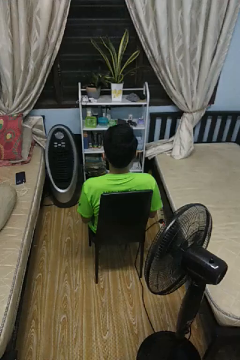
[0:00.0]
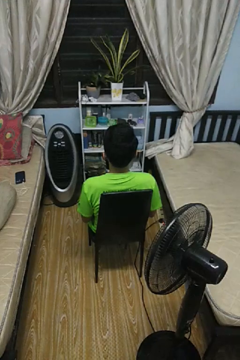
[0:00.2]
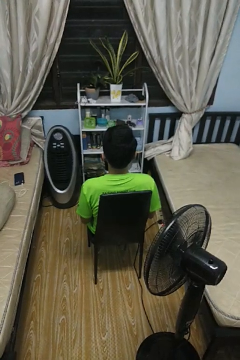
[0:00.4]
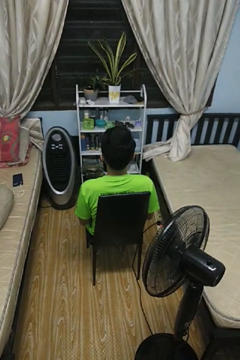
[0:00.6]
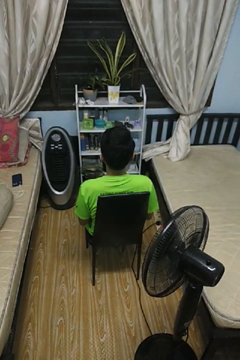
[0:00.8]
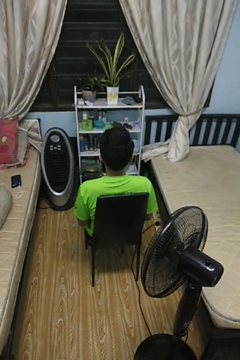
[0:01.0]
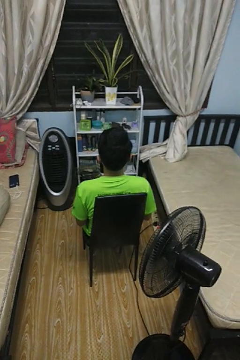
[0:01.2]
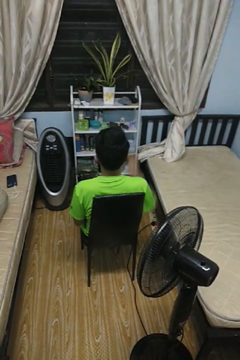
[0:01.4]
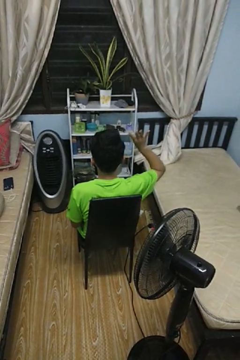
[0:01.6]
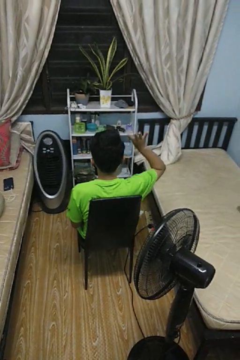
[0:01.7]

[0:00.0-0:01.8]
person gestures number four

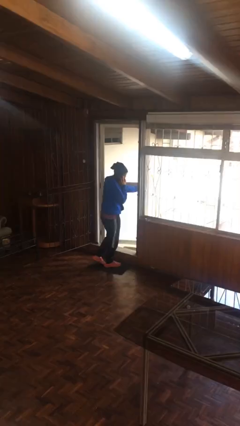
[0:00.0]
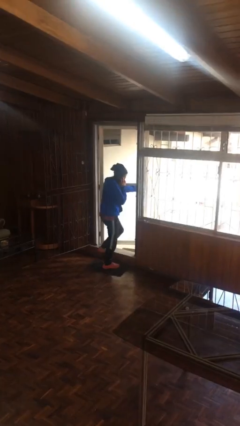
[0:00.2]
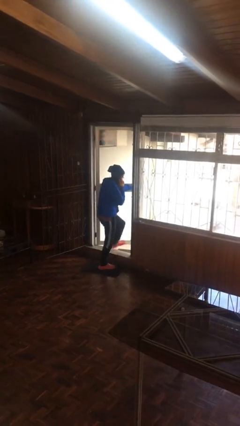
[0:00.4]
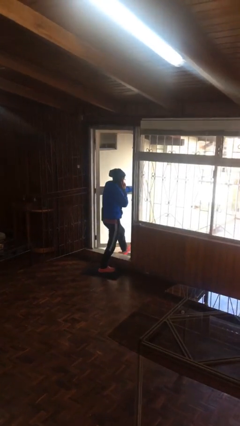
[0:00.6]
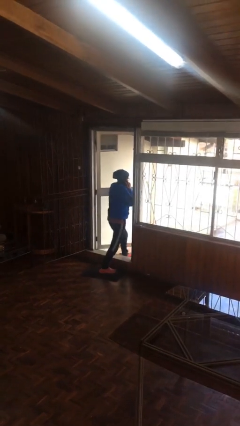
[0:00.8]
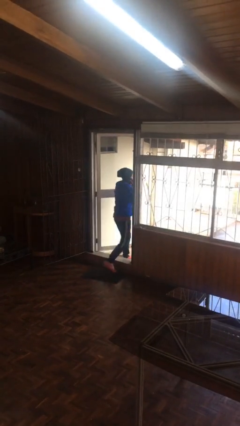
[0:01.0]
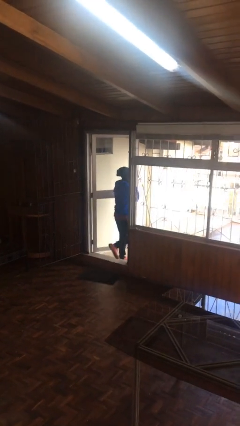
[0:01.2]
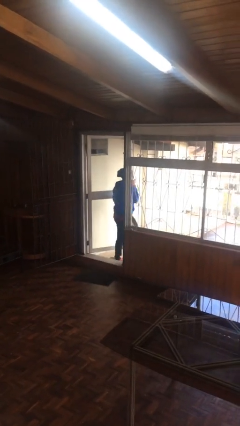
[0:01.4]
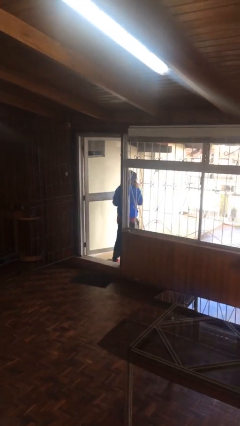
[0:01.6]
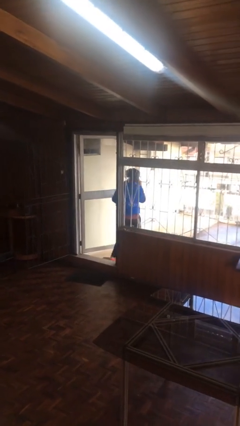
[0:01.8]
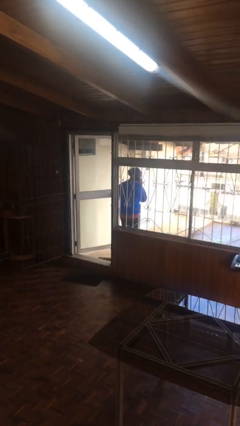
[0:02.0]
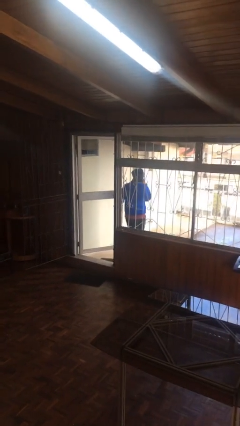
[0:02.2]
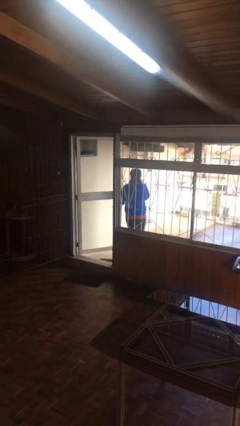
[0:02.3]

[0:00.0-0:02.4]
person exits scene through structure

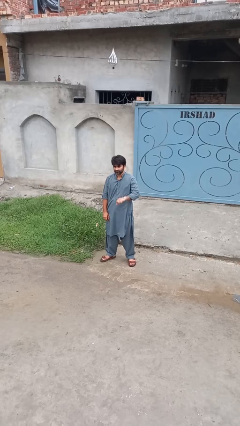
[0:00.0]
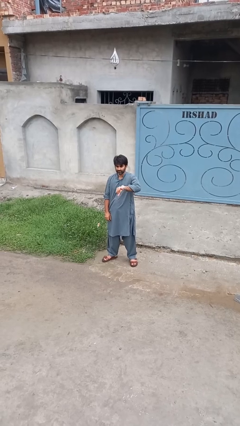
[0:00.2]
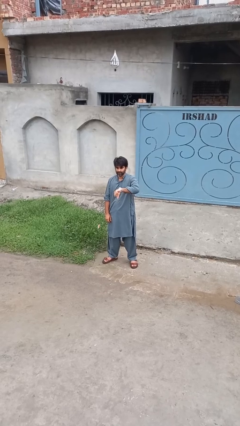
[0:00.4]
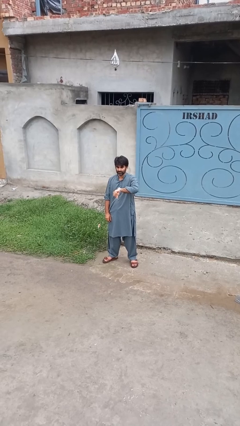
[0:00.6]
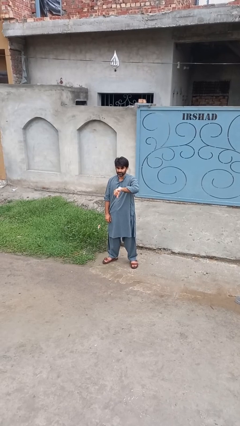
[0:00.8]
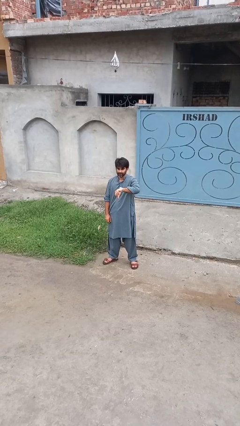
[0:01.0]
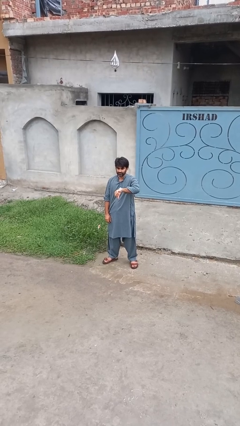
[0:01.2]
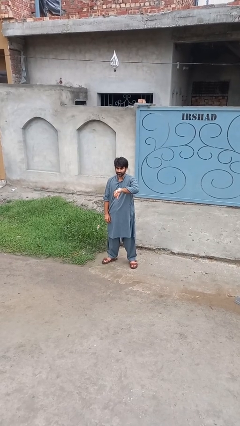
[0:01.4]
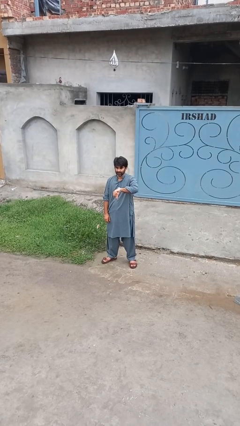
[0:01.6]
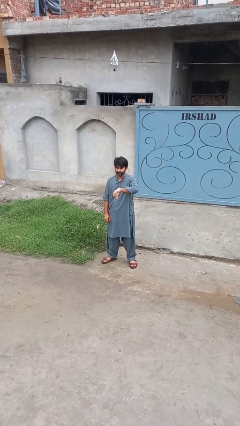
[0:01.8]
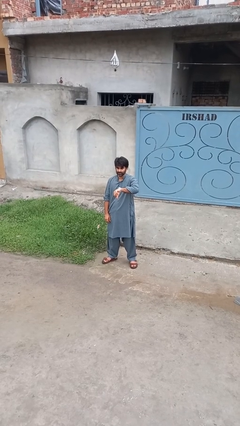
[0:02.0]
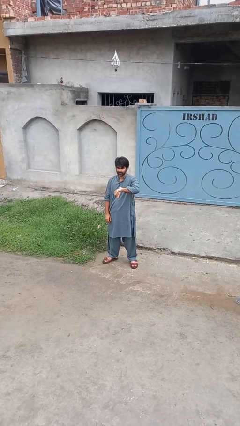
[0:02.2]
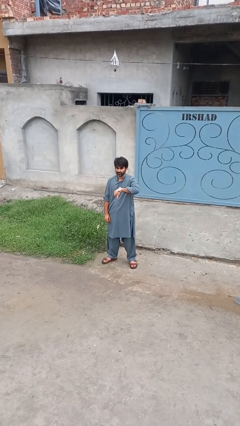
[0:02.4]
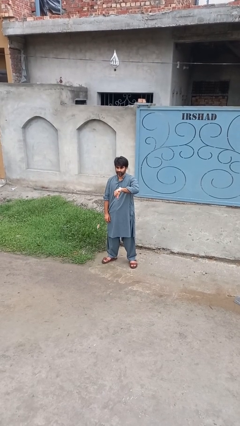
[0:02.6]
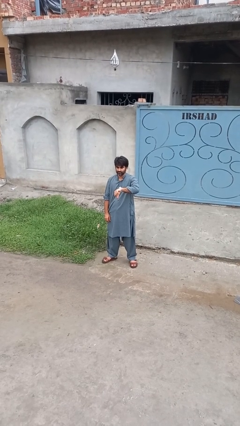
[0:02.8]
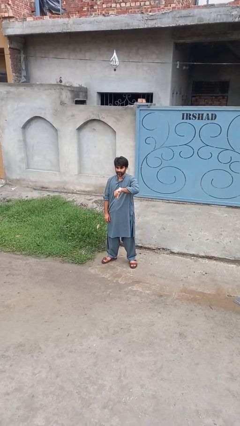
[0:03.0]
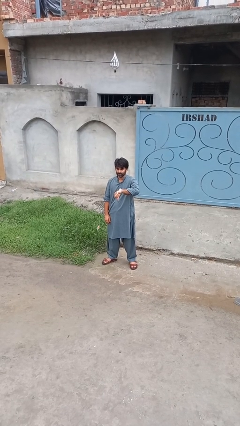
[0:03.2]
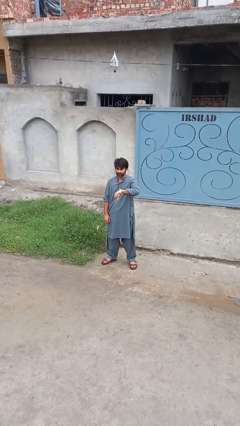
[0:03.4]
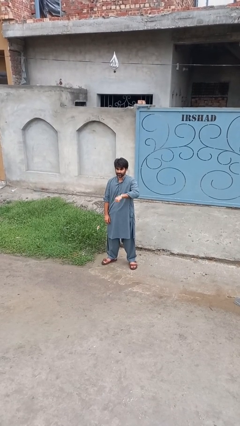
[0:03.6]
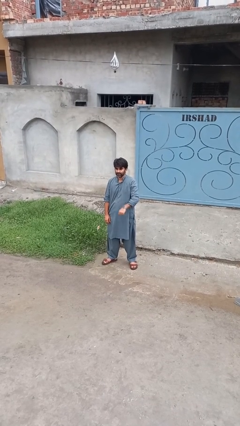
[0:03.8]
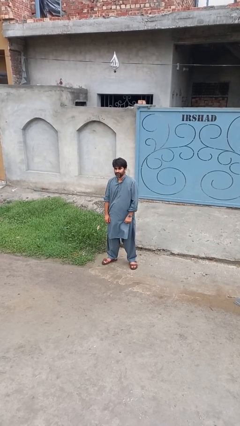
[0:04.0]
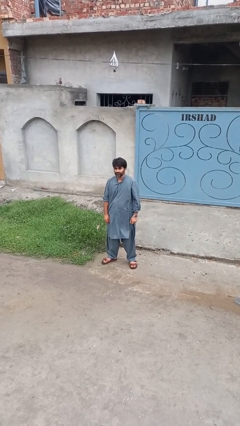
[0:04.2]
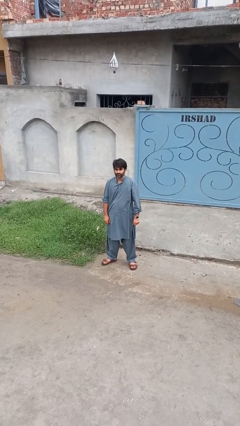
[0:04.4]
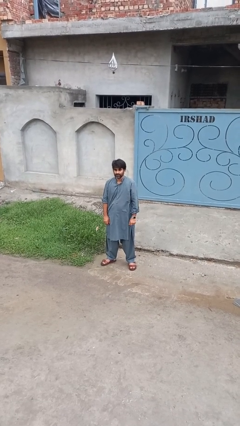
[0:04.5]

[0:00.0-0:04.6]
person gestures thumbs down

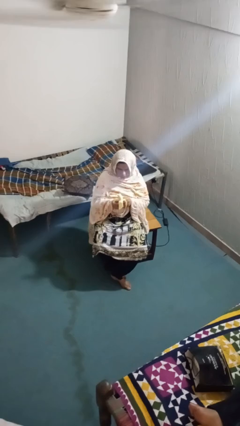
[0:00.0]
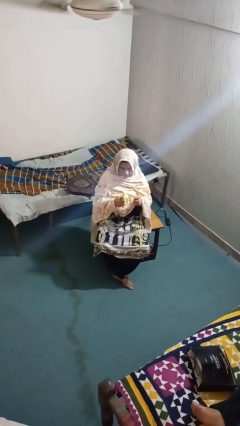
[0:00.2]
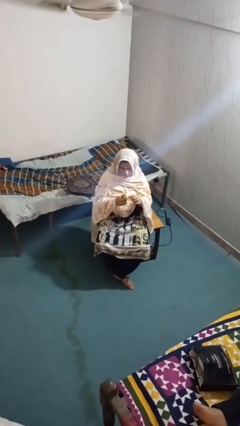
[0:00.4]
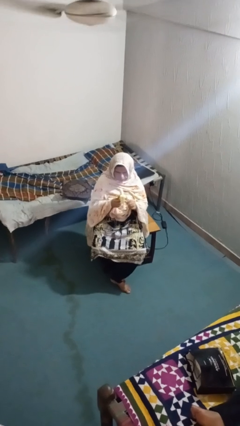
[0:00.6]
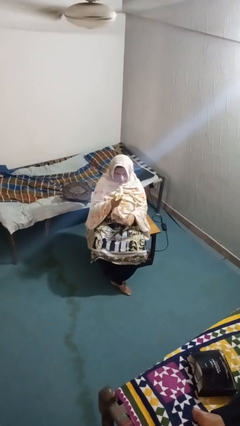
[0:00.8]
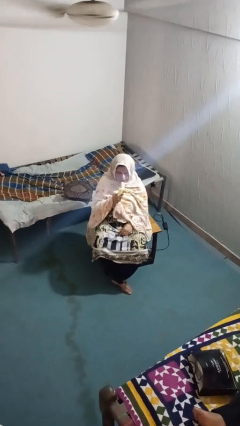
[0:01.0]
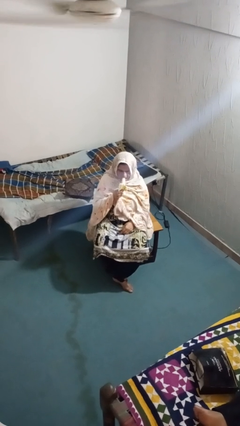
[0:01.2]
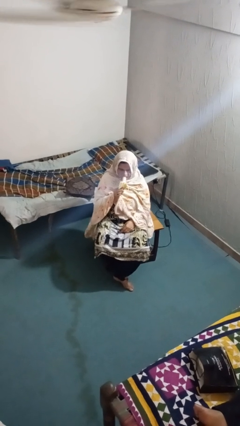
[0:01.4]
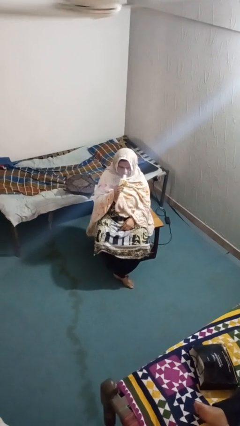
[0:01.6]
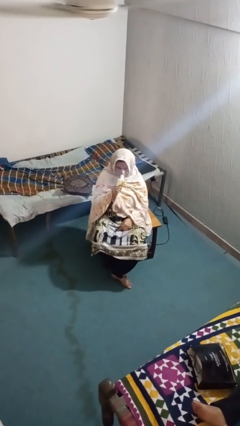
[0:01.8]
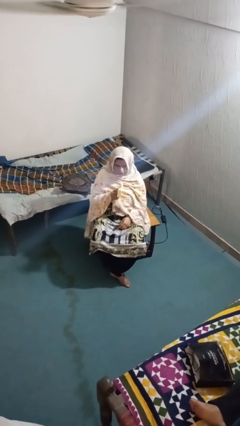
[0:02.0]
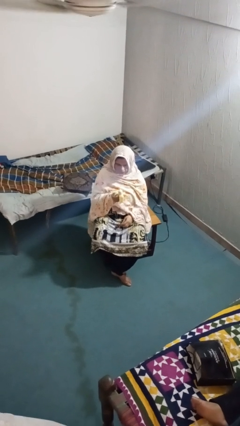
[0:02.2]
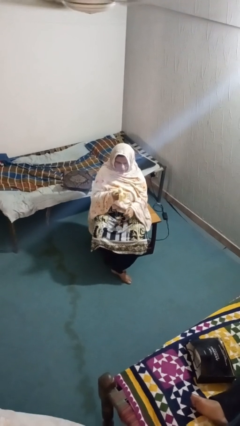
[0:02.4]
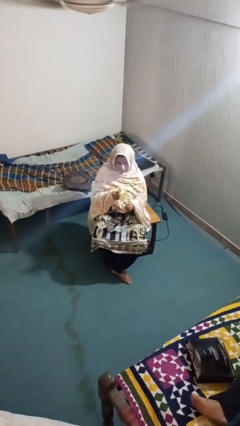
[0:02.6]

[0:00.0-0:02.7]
person eats banana

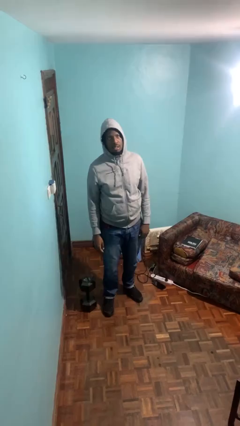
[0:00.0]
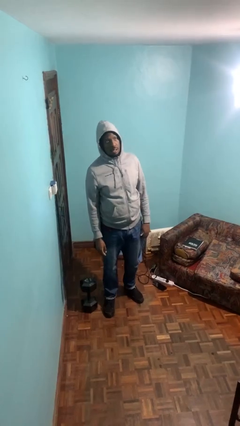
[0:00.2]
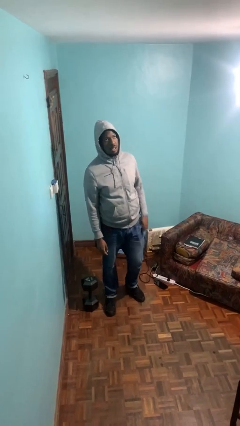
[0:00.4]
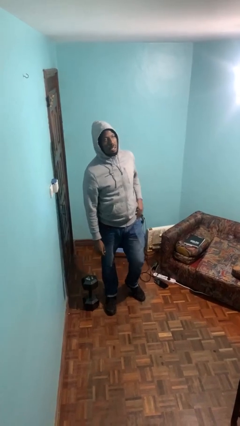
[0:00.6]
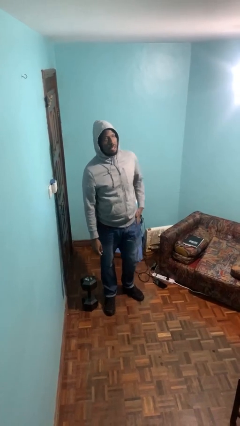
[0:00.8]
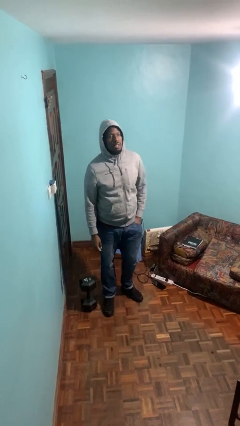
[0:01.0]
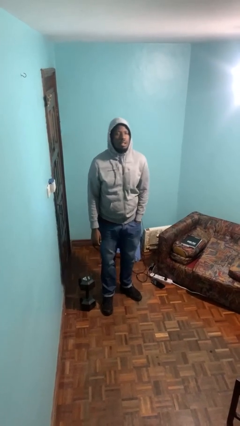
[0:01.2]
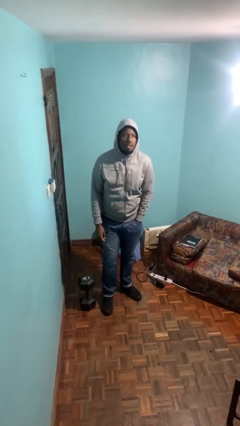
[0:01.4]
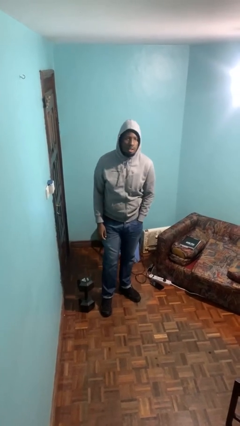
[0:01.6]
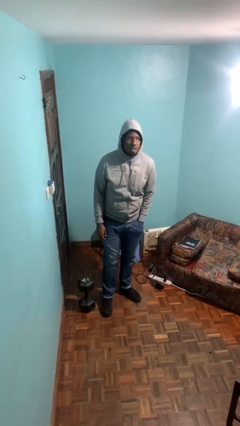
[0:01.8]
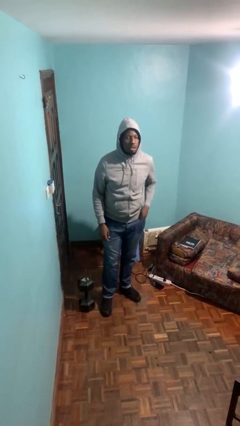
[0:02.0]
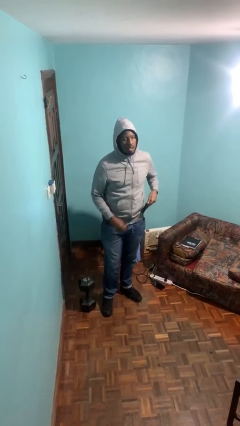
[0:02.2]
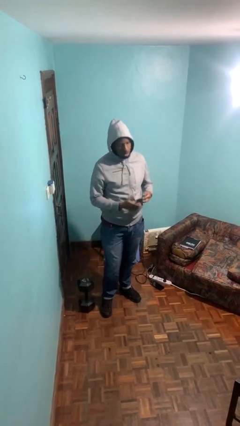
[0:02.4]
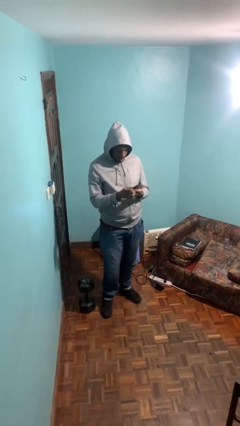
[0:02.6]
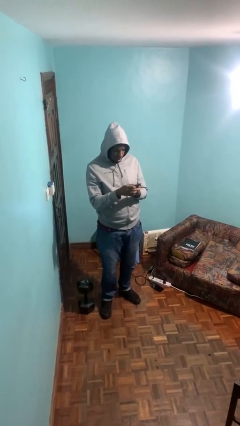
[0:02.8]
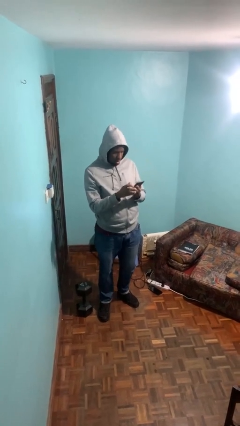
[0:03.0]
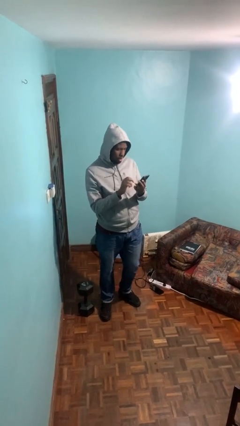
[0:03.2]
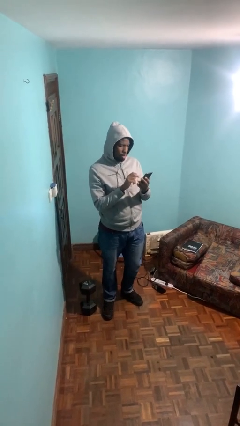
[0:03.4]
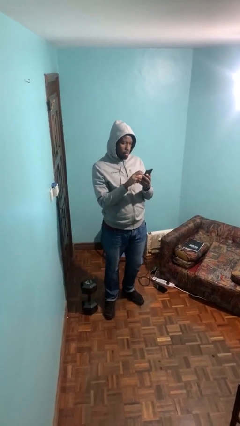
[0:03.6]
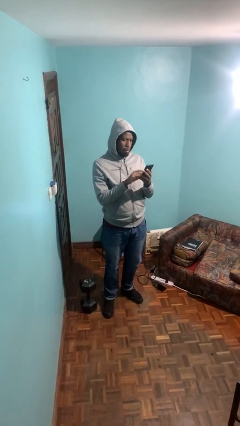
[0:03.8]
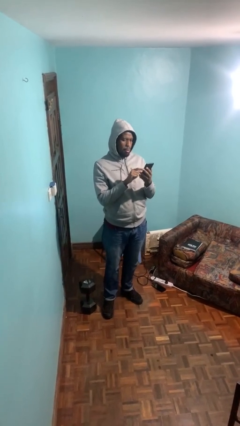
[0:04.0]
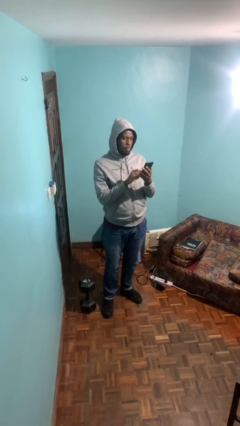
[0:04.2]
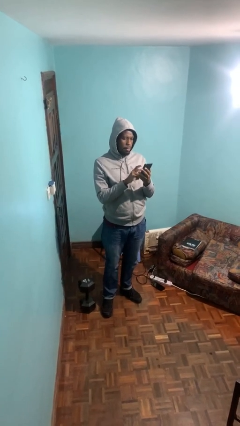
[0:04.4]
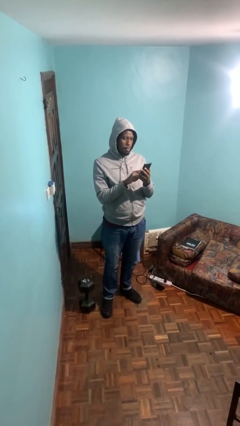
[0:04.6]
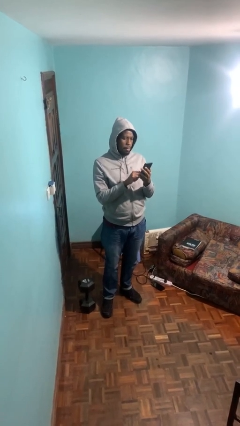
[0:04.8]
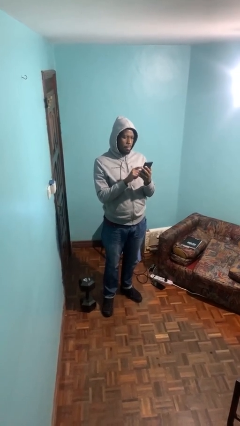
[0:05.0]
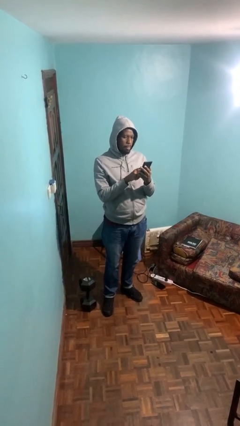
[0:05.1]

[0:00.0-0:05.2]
person takes phone from pocket

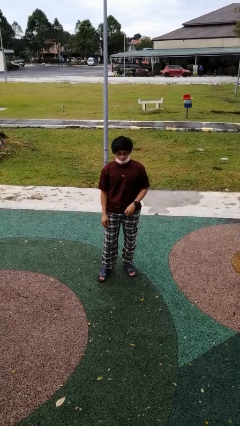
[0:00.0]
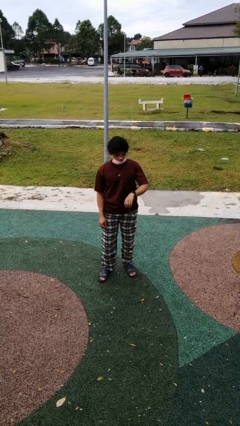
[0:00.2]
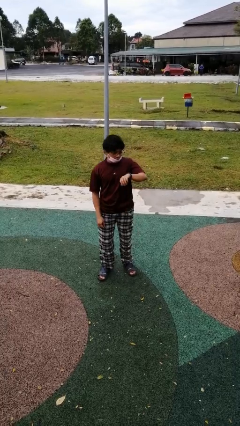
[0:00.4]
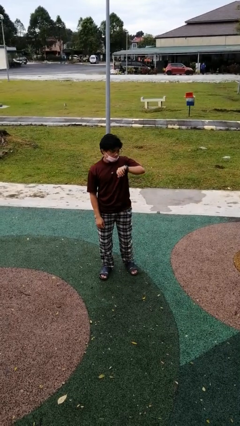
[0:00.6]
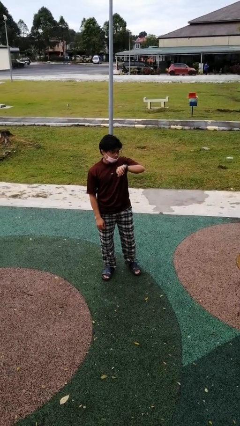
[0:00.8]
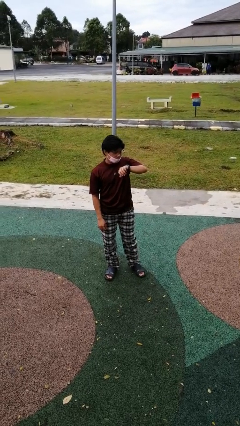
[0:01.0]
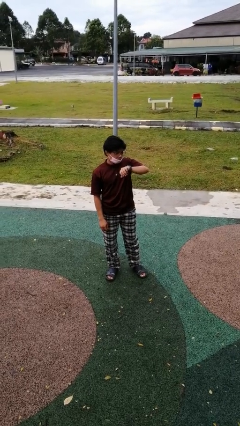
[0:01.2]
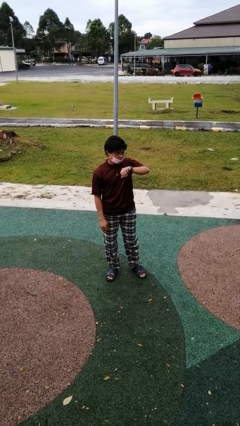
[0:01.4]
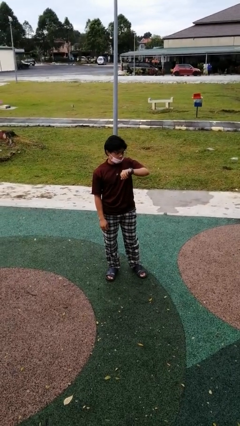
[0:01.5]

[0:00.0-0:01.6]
person looks at wristwatch
